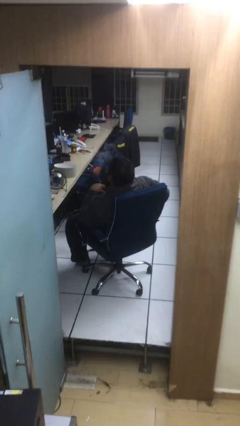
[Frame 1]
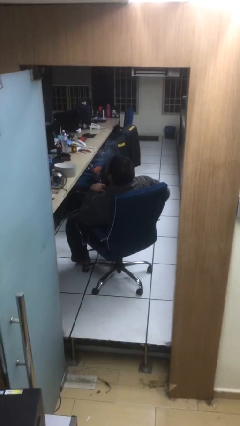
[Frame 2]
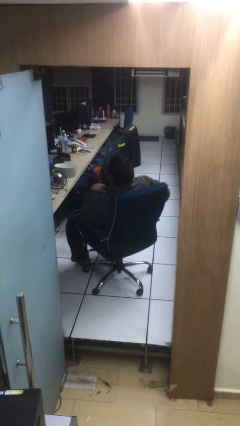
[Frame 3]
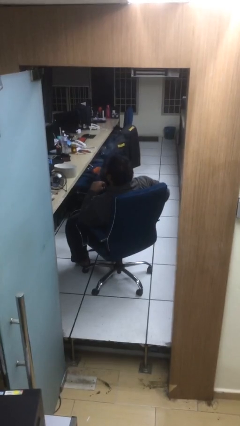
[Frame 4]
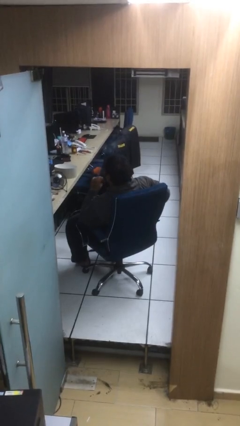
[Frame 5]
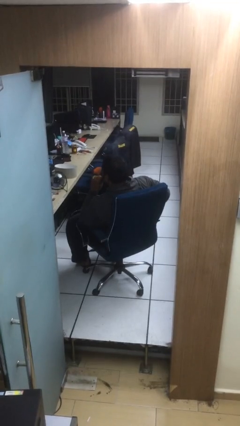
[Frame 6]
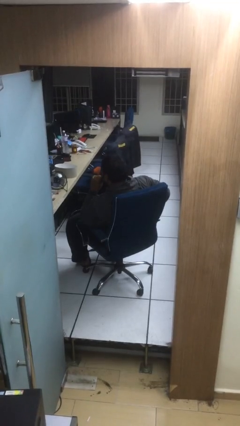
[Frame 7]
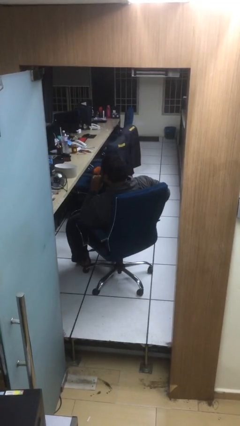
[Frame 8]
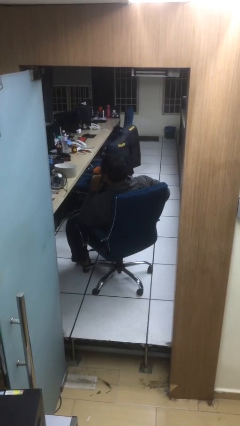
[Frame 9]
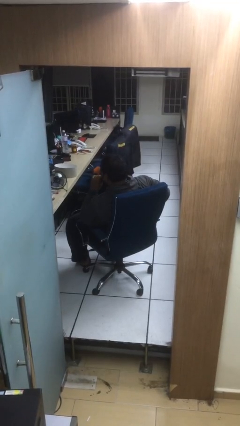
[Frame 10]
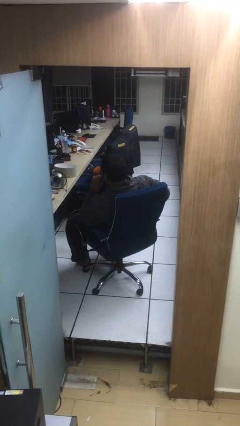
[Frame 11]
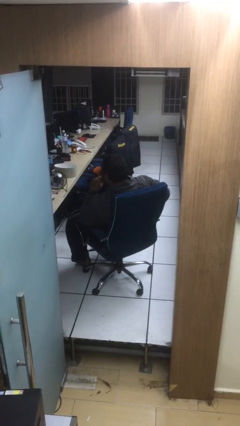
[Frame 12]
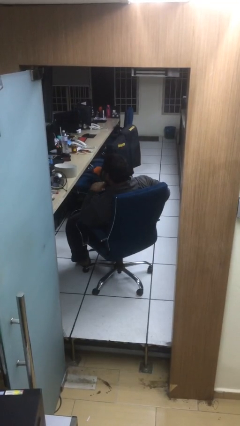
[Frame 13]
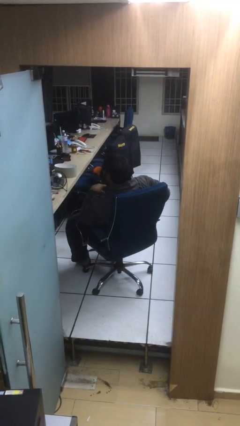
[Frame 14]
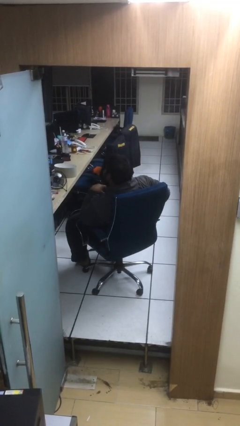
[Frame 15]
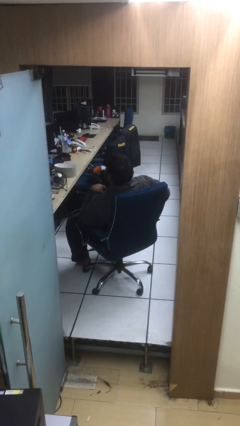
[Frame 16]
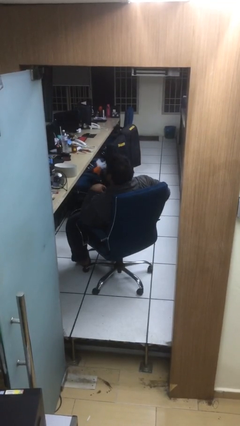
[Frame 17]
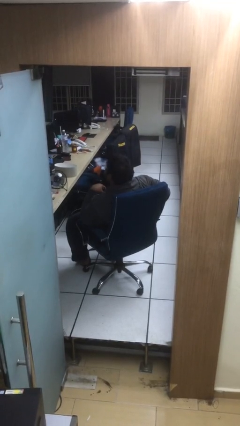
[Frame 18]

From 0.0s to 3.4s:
person vapes

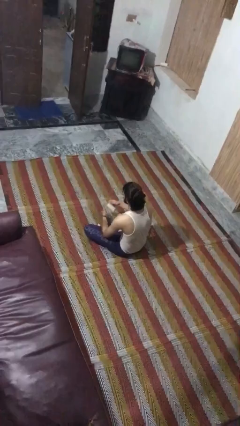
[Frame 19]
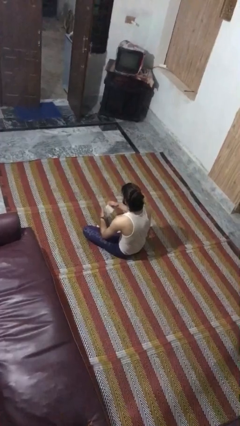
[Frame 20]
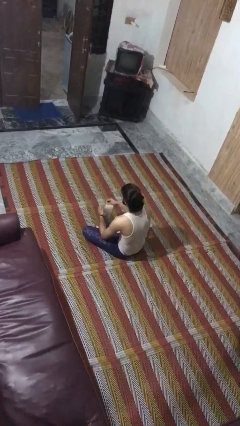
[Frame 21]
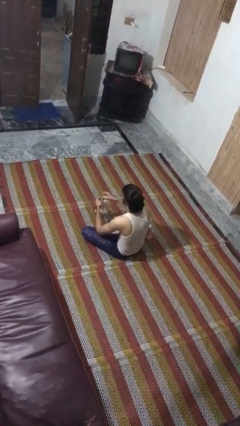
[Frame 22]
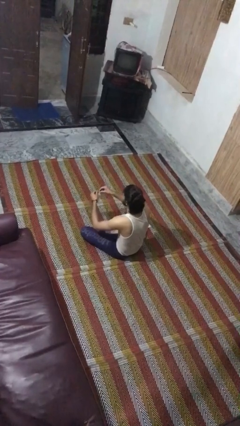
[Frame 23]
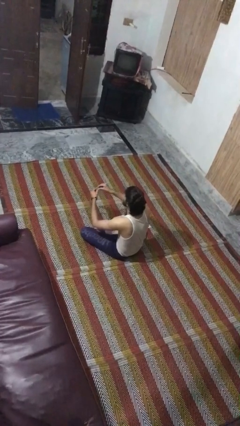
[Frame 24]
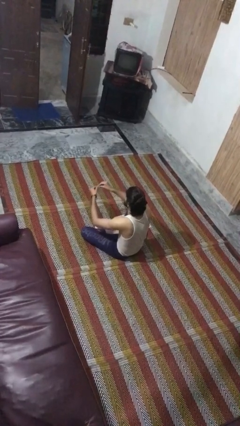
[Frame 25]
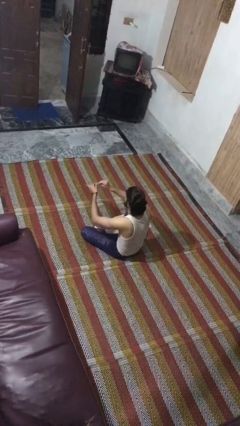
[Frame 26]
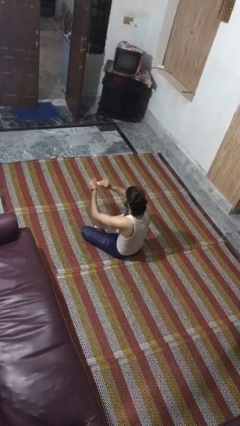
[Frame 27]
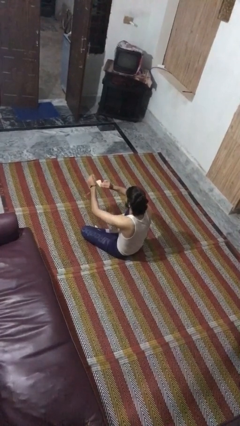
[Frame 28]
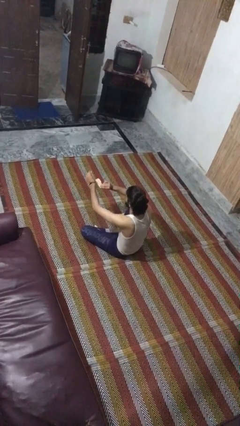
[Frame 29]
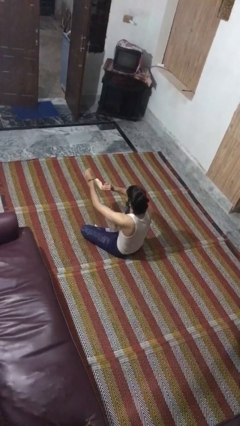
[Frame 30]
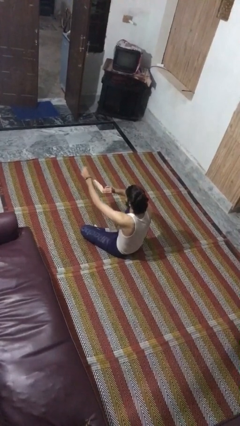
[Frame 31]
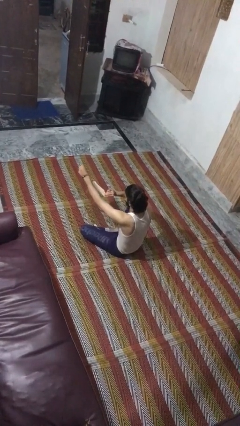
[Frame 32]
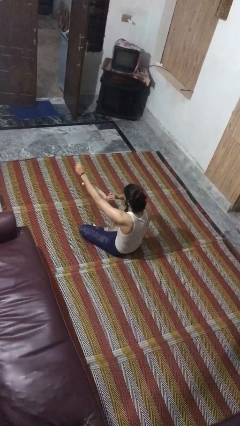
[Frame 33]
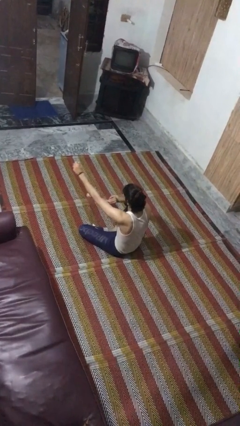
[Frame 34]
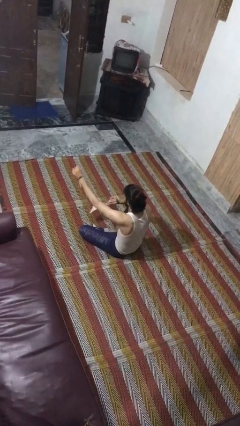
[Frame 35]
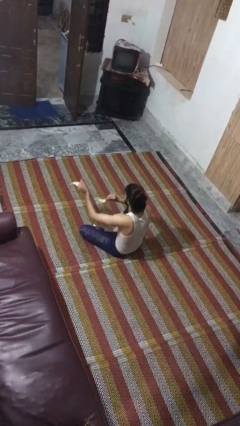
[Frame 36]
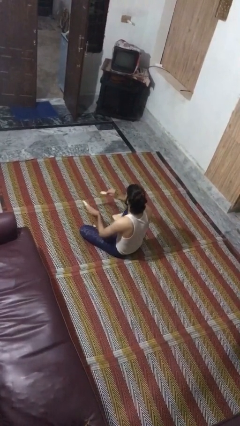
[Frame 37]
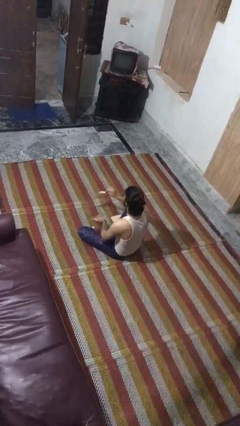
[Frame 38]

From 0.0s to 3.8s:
person tears paper

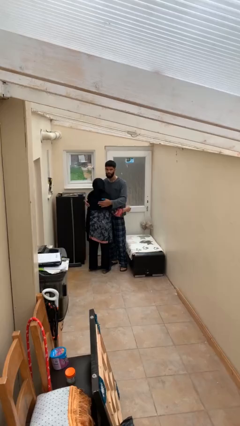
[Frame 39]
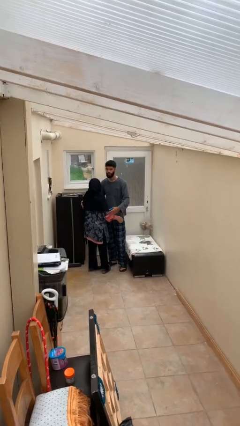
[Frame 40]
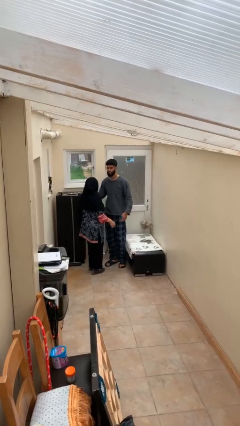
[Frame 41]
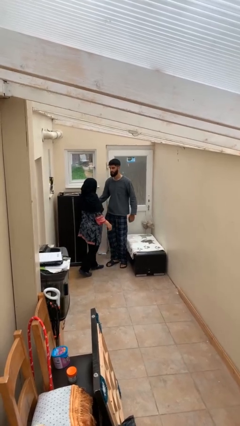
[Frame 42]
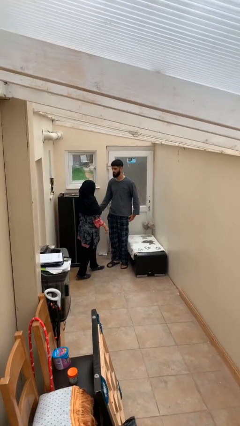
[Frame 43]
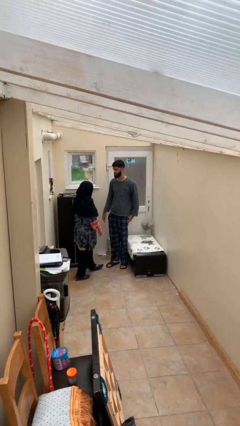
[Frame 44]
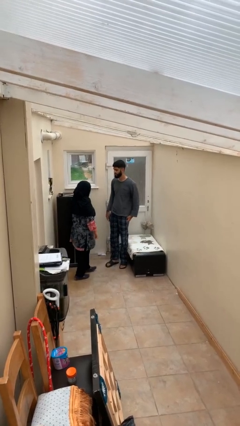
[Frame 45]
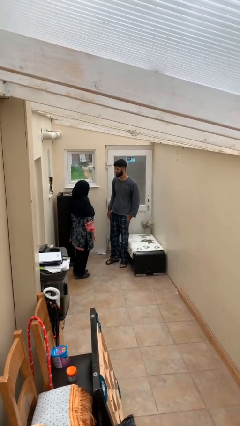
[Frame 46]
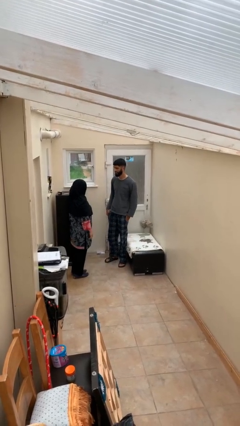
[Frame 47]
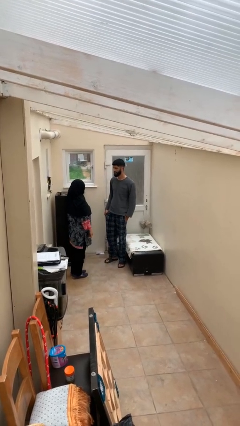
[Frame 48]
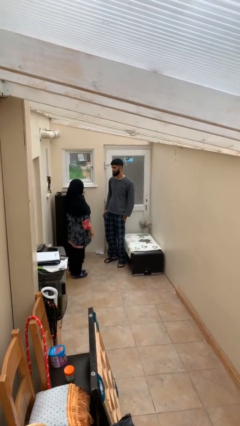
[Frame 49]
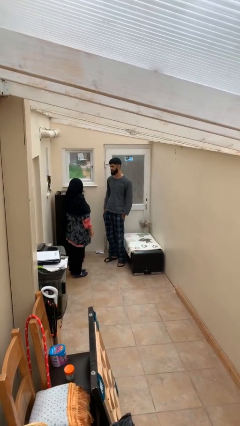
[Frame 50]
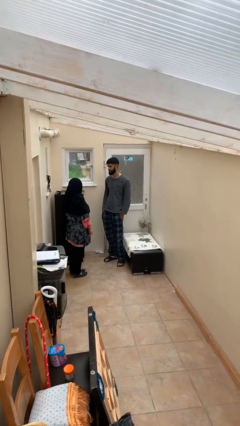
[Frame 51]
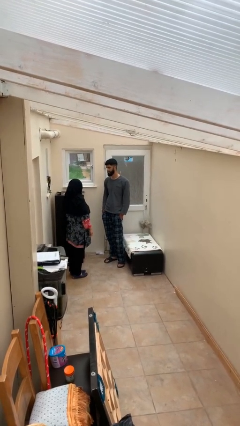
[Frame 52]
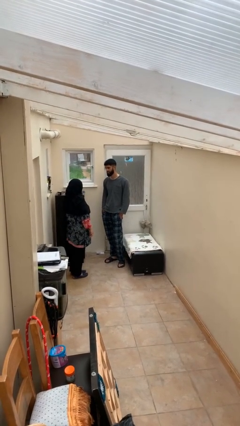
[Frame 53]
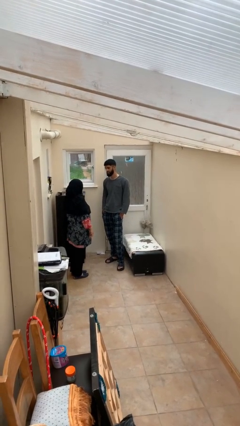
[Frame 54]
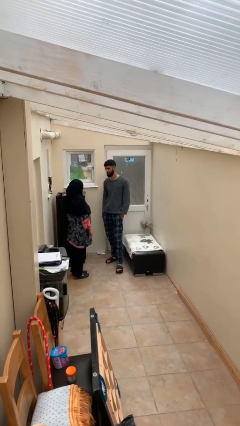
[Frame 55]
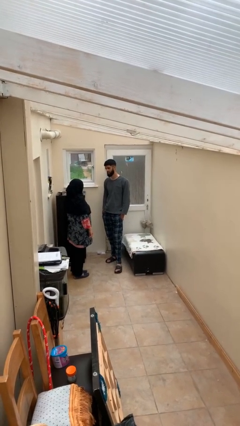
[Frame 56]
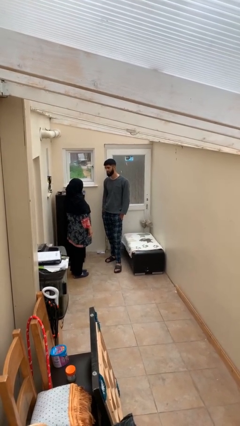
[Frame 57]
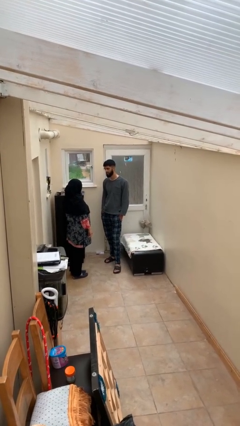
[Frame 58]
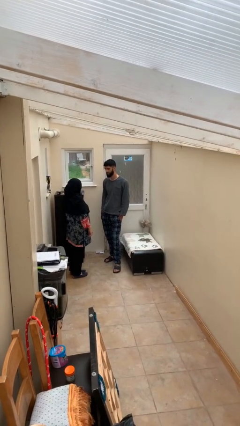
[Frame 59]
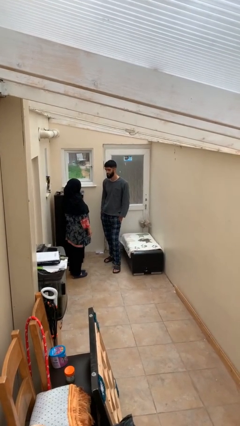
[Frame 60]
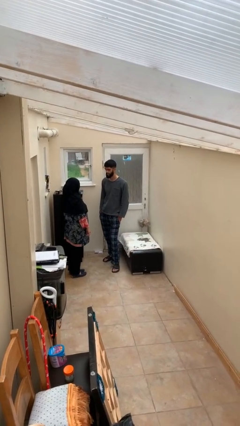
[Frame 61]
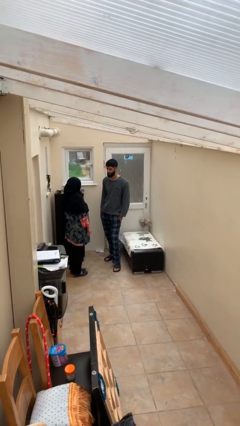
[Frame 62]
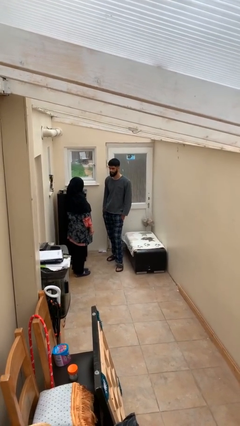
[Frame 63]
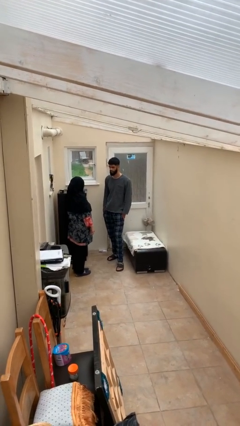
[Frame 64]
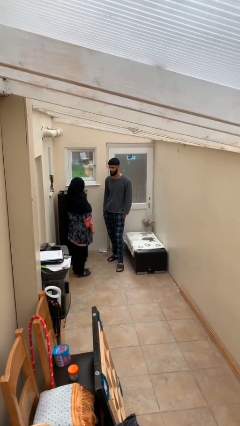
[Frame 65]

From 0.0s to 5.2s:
person talks to person

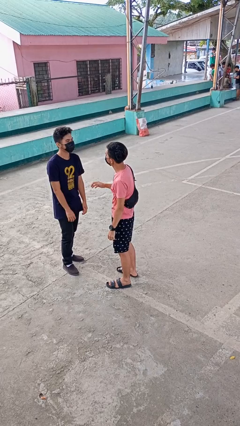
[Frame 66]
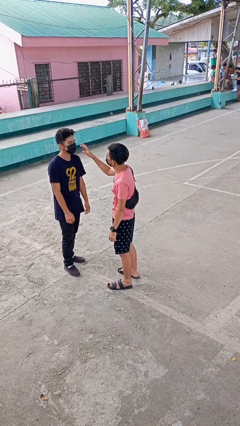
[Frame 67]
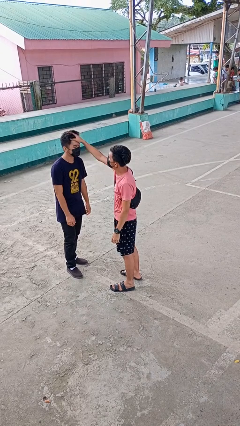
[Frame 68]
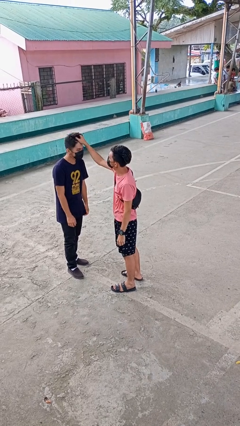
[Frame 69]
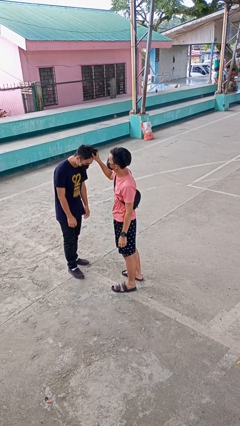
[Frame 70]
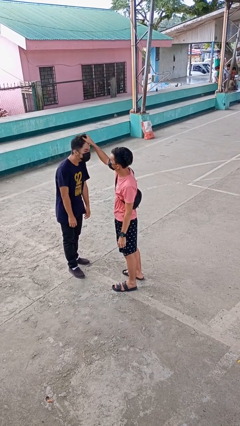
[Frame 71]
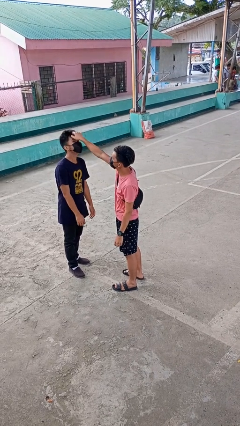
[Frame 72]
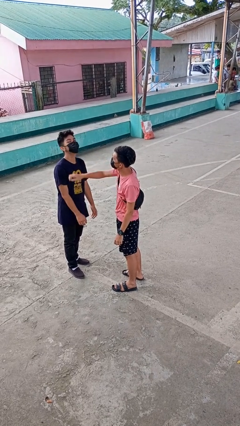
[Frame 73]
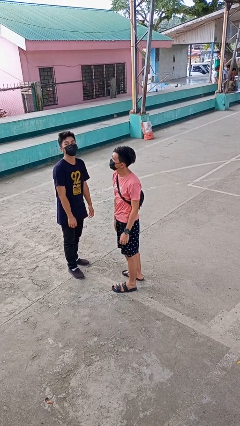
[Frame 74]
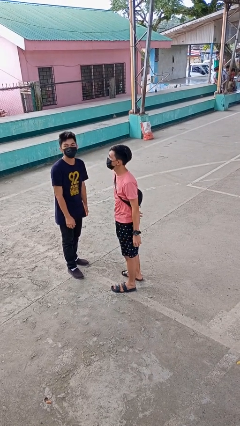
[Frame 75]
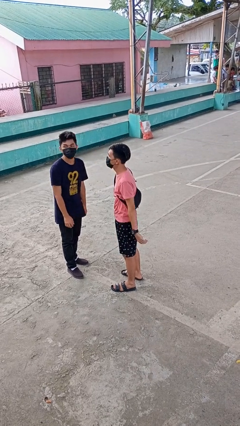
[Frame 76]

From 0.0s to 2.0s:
person grabs person by hair

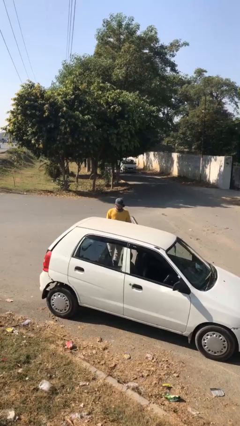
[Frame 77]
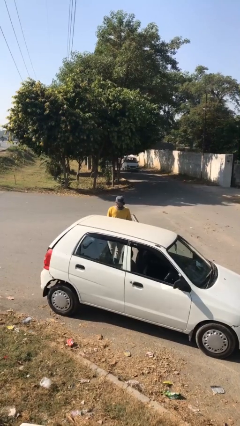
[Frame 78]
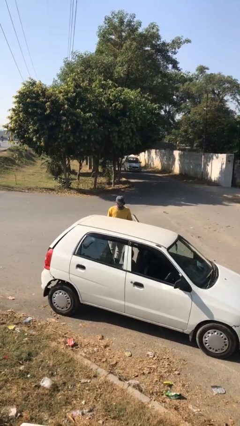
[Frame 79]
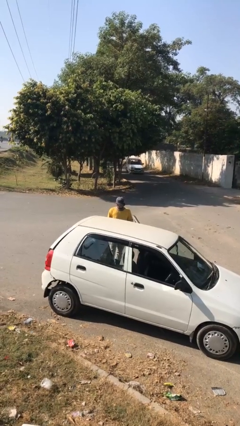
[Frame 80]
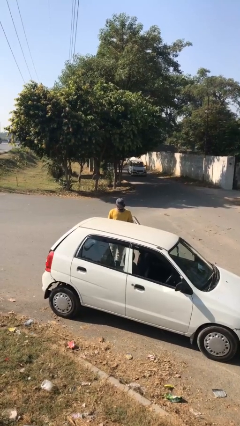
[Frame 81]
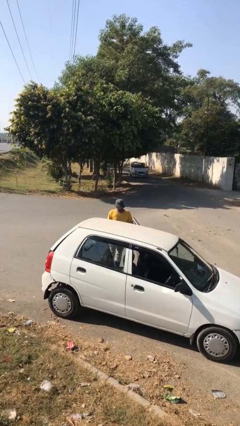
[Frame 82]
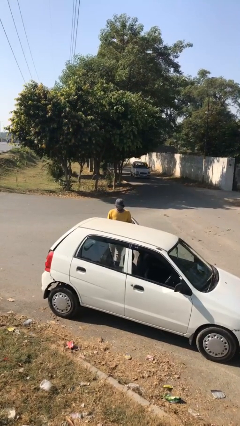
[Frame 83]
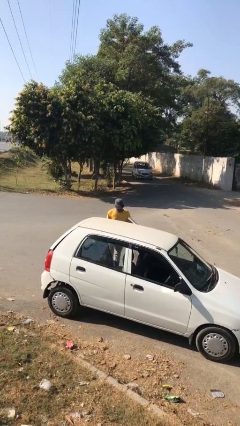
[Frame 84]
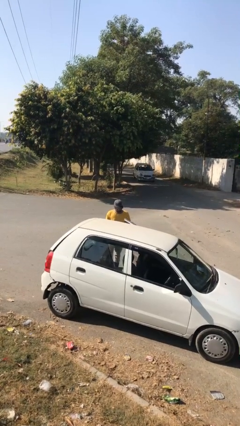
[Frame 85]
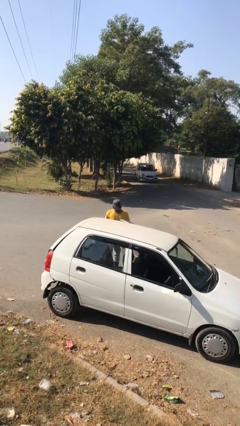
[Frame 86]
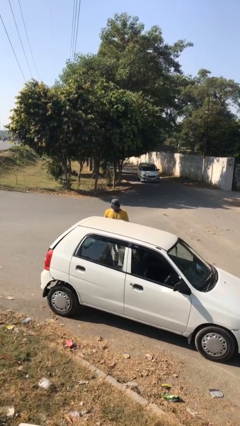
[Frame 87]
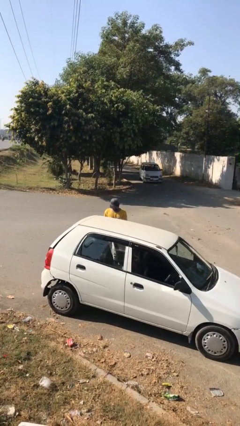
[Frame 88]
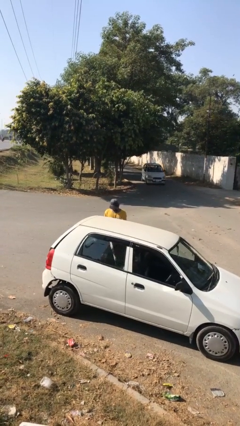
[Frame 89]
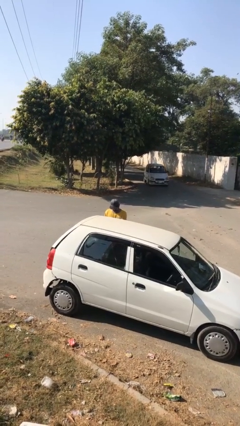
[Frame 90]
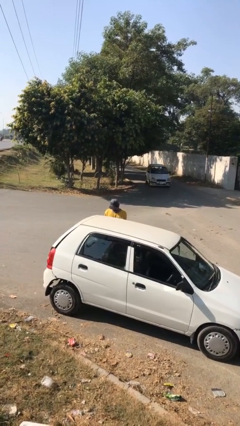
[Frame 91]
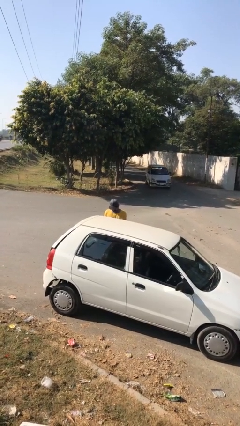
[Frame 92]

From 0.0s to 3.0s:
person closes car door

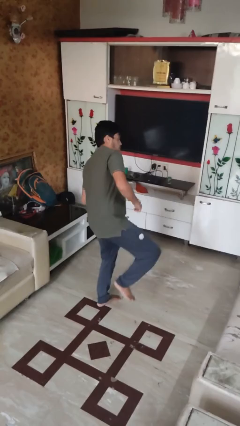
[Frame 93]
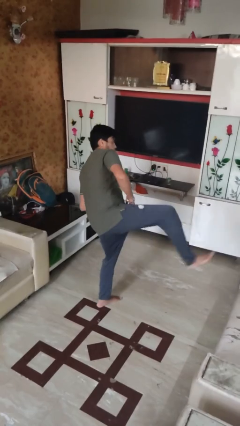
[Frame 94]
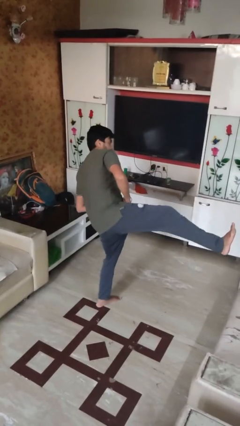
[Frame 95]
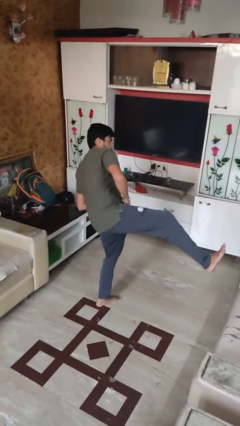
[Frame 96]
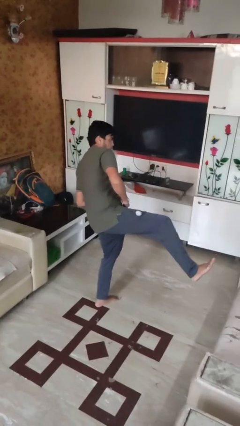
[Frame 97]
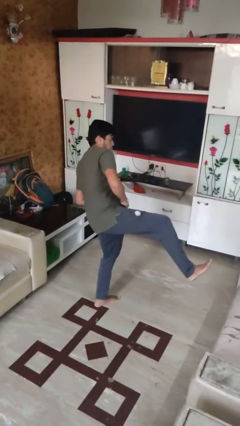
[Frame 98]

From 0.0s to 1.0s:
person karate kicks
